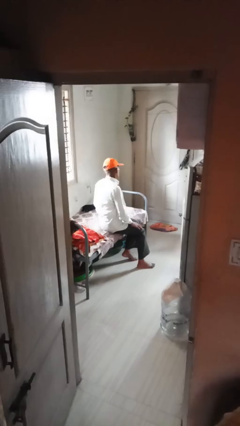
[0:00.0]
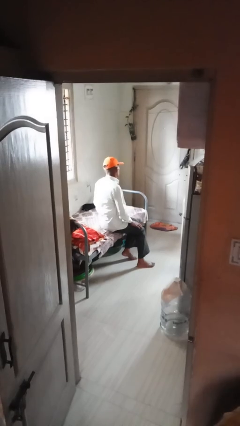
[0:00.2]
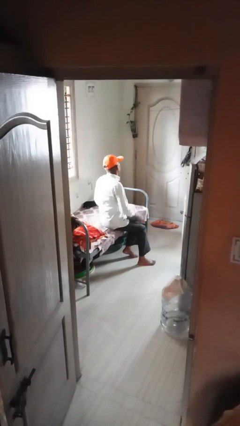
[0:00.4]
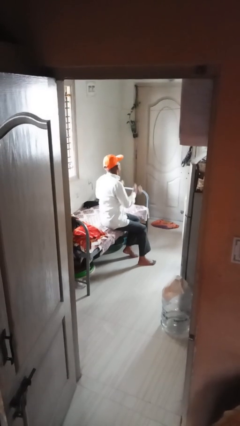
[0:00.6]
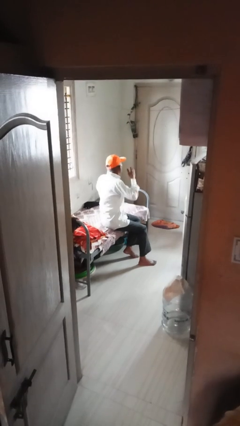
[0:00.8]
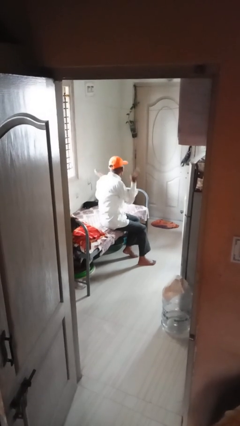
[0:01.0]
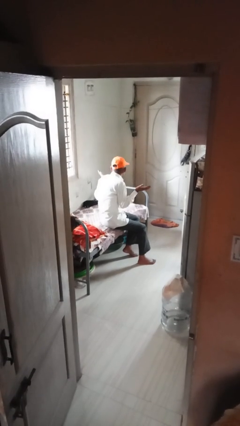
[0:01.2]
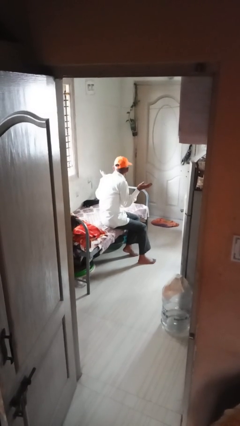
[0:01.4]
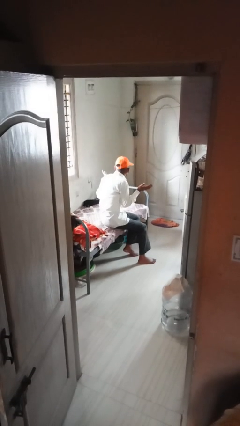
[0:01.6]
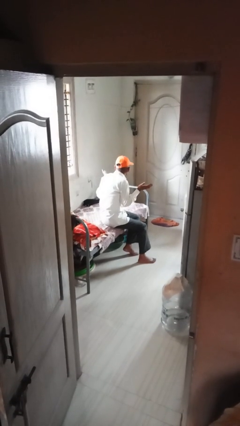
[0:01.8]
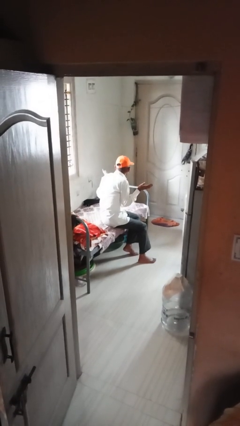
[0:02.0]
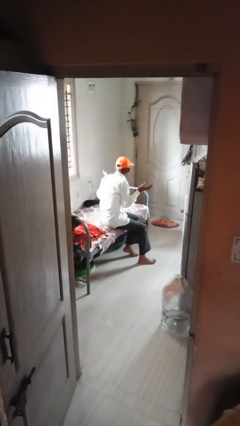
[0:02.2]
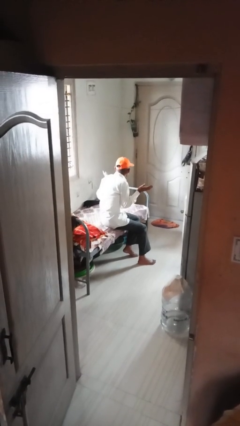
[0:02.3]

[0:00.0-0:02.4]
person shrugs

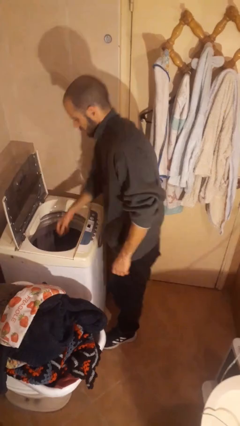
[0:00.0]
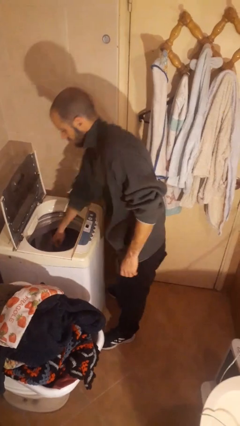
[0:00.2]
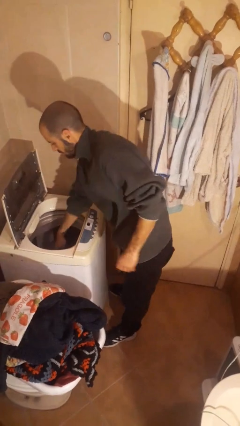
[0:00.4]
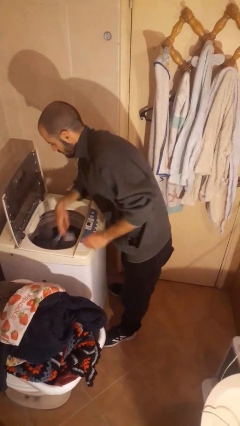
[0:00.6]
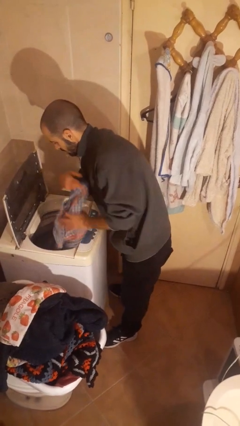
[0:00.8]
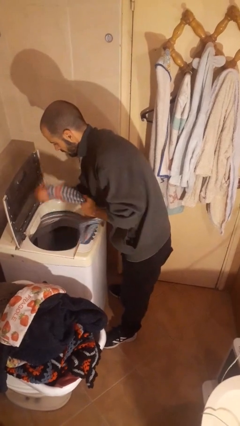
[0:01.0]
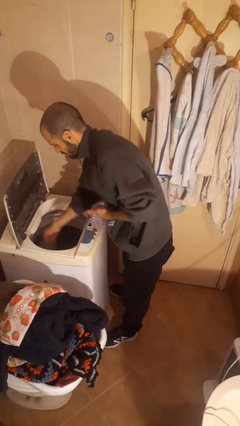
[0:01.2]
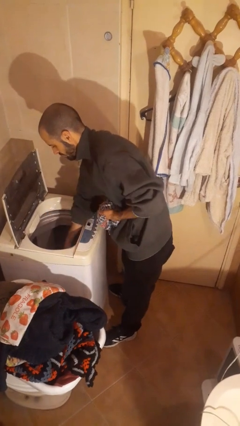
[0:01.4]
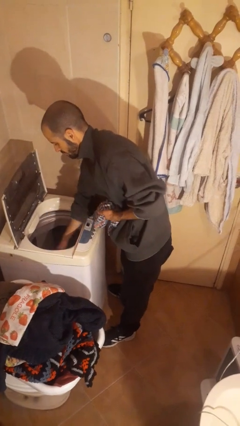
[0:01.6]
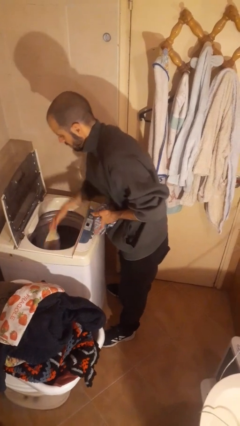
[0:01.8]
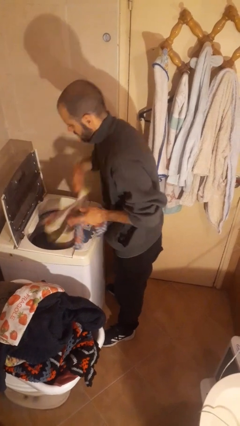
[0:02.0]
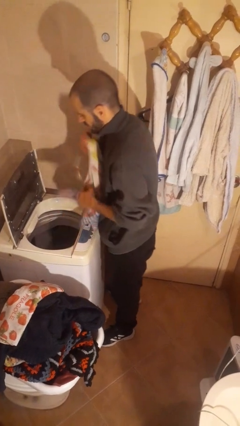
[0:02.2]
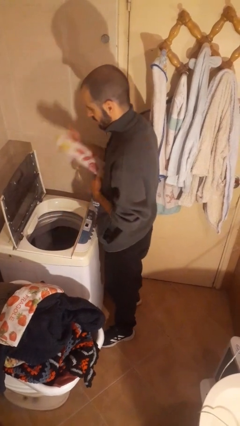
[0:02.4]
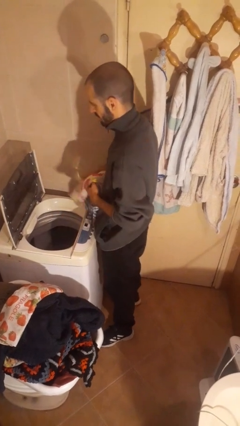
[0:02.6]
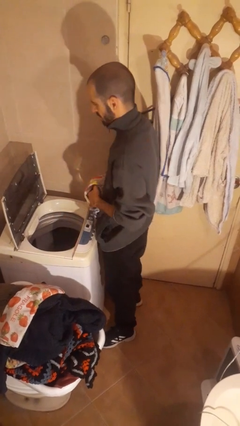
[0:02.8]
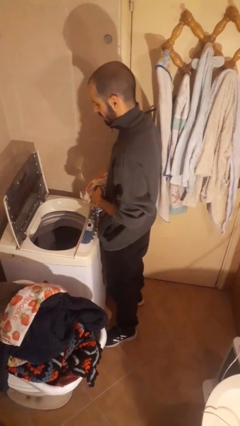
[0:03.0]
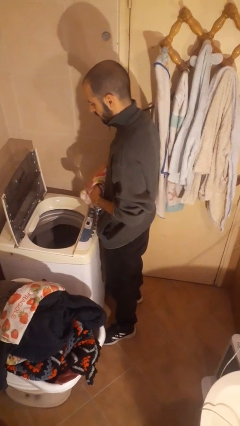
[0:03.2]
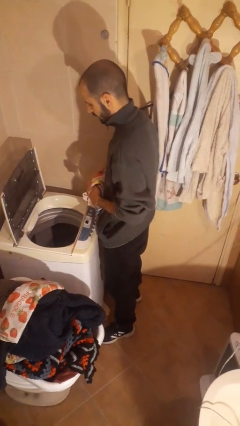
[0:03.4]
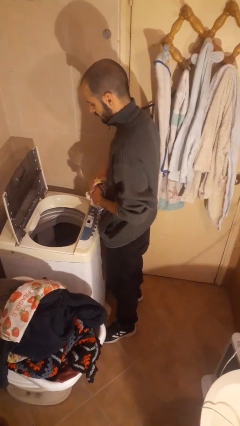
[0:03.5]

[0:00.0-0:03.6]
person loads clotheswasher

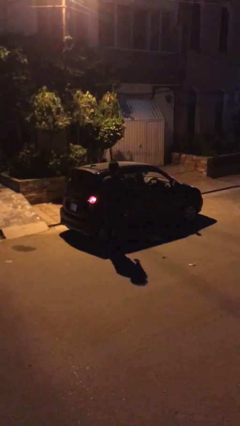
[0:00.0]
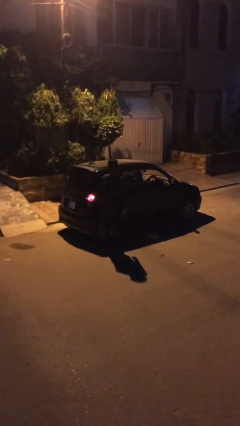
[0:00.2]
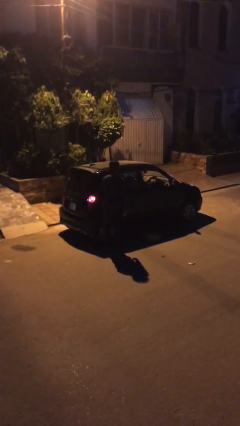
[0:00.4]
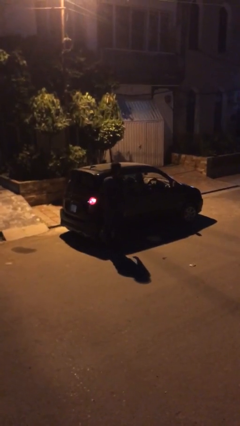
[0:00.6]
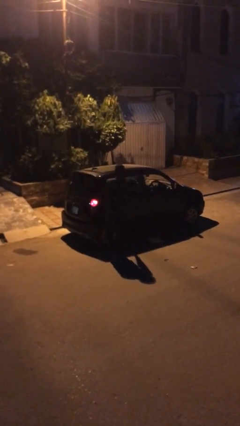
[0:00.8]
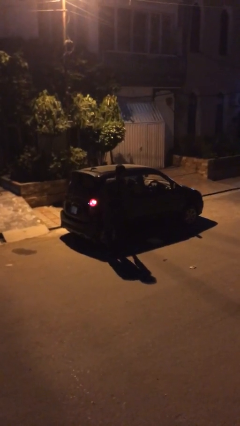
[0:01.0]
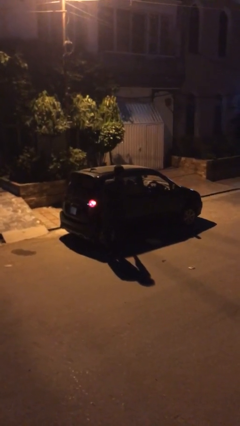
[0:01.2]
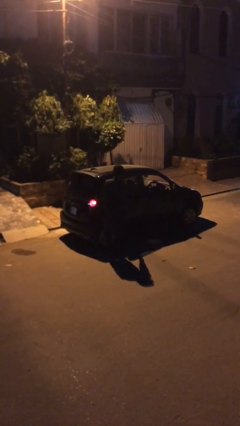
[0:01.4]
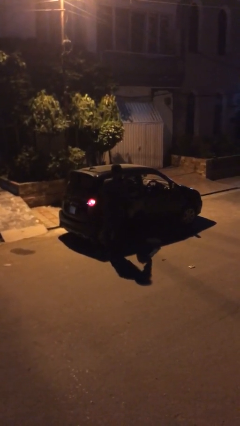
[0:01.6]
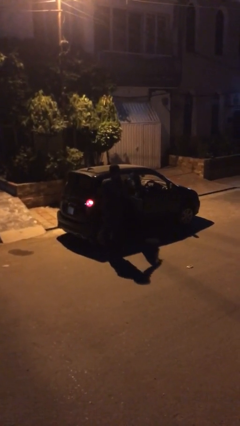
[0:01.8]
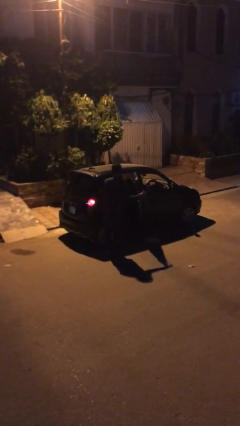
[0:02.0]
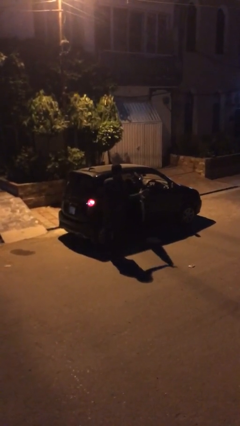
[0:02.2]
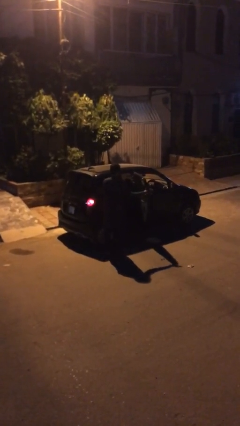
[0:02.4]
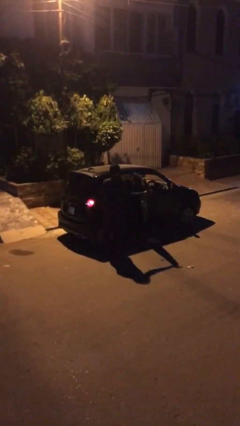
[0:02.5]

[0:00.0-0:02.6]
person opens car door

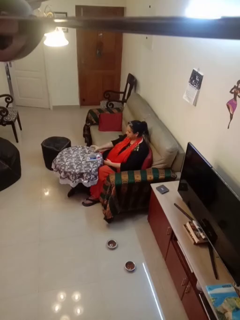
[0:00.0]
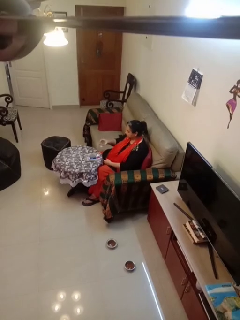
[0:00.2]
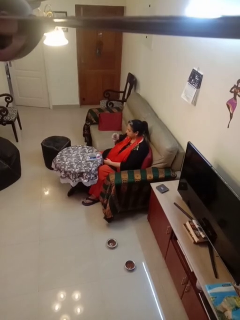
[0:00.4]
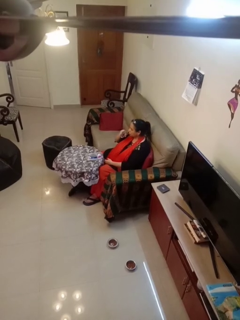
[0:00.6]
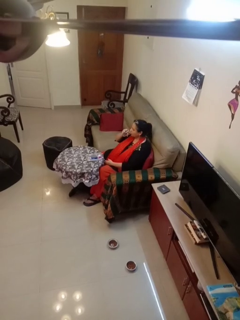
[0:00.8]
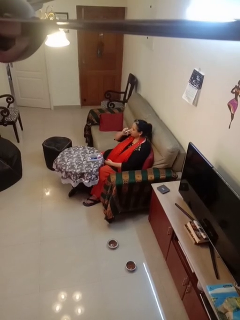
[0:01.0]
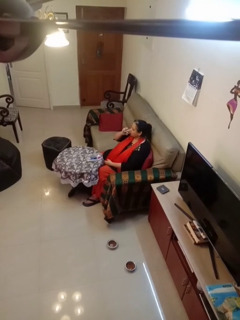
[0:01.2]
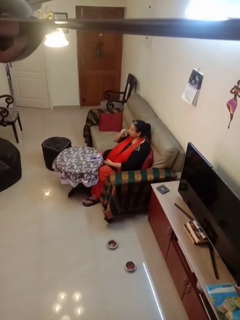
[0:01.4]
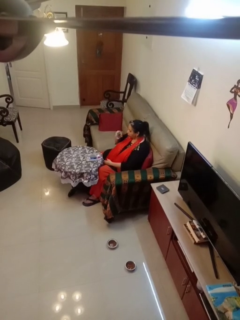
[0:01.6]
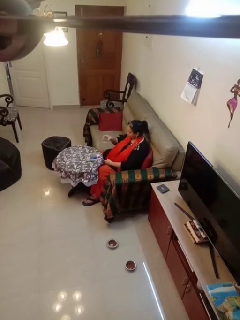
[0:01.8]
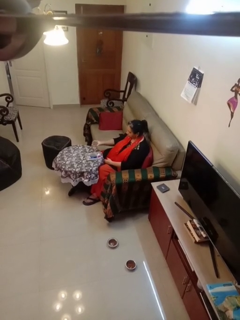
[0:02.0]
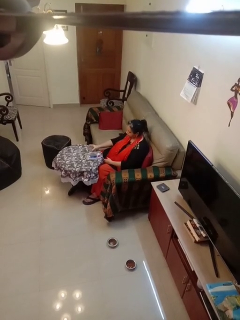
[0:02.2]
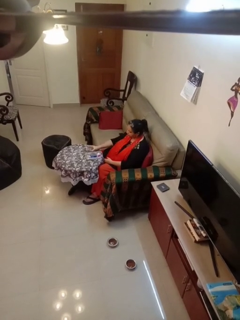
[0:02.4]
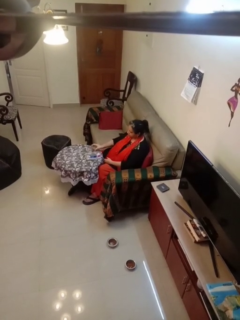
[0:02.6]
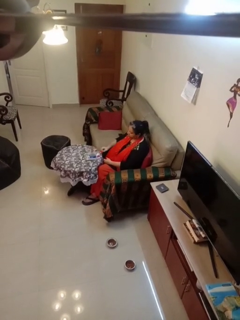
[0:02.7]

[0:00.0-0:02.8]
person drinks from cup

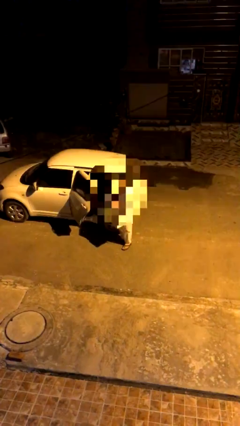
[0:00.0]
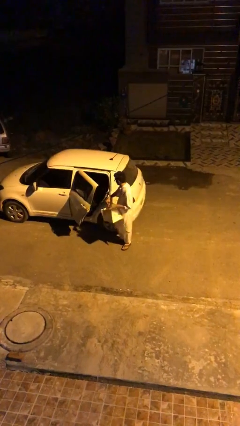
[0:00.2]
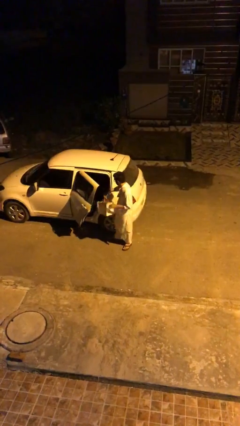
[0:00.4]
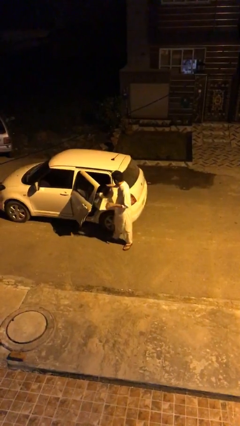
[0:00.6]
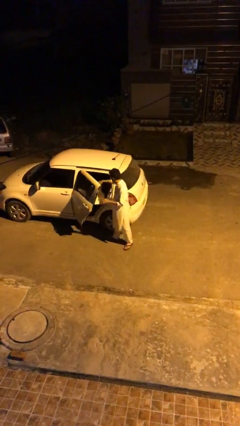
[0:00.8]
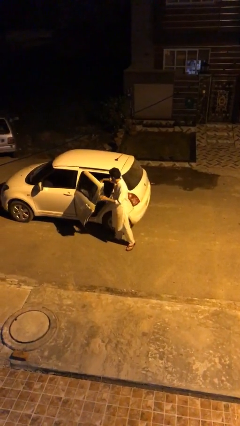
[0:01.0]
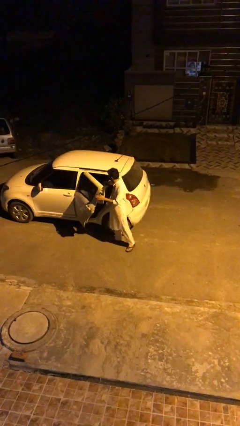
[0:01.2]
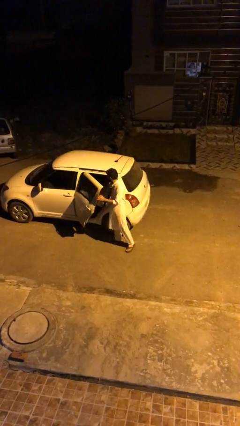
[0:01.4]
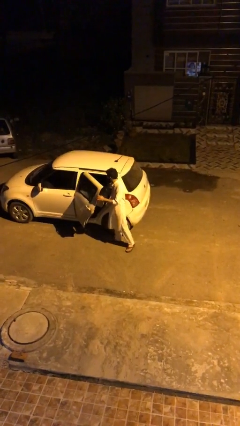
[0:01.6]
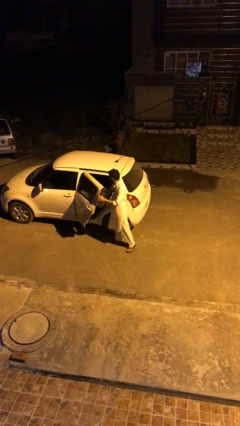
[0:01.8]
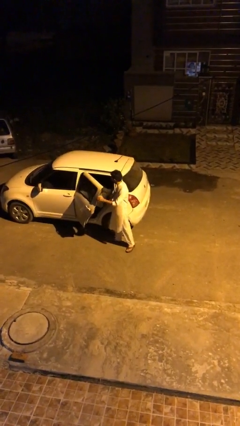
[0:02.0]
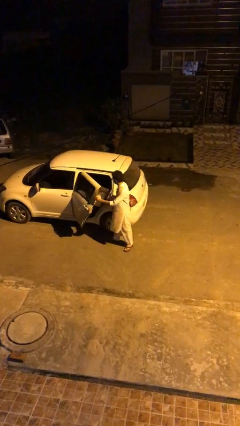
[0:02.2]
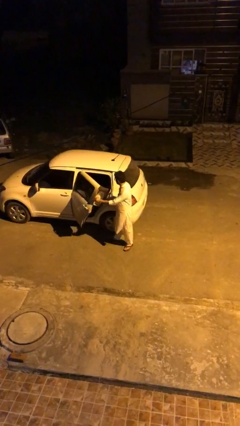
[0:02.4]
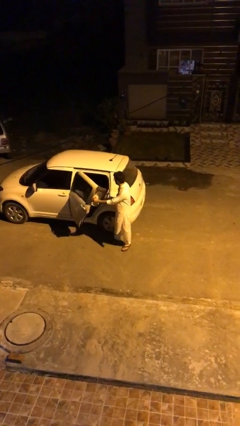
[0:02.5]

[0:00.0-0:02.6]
person loads car

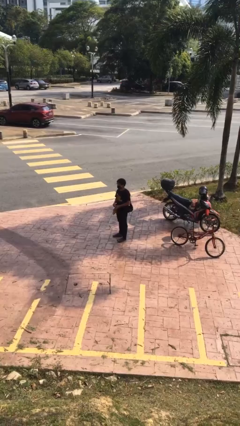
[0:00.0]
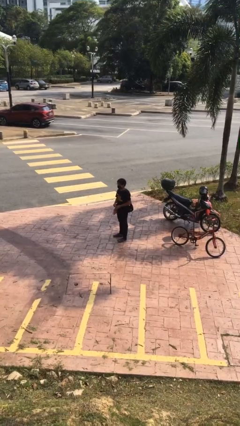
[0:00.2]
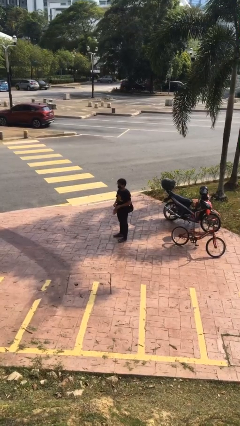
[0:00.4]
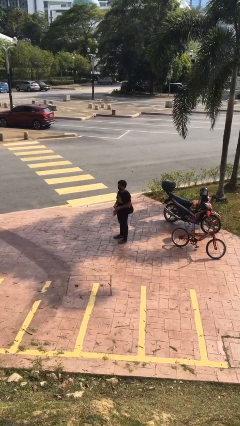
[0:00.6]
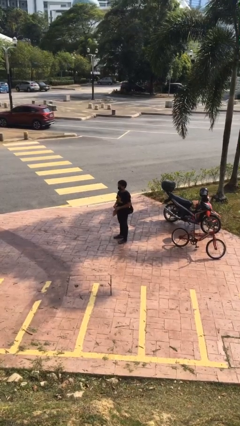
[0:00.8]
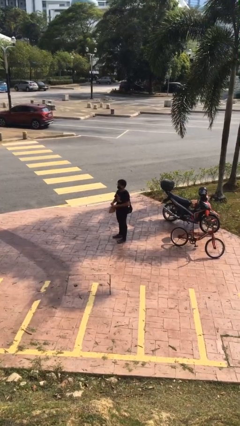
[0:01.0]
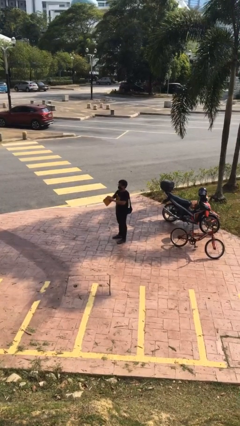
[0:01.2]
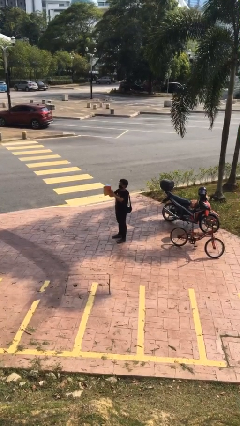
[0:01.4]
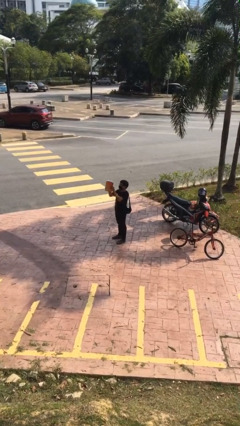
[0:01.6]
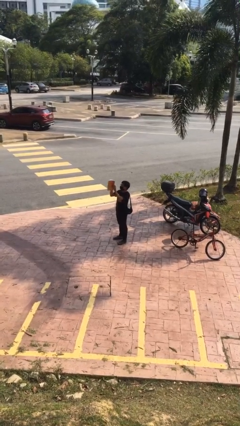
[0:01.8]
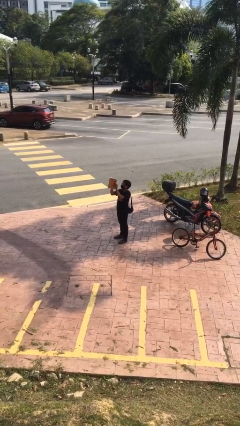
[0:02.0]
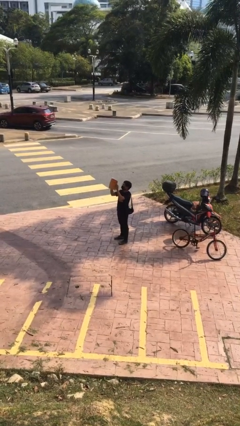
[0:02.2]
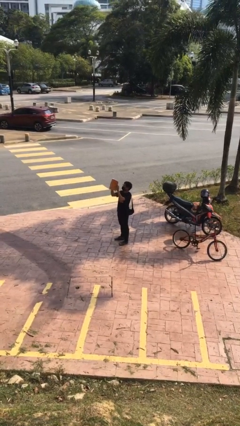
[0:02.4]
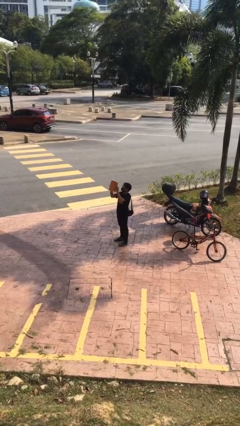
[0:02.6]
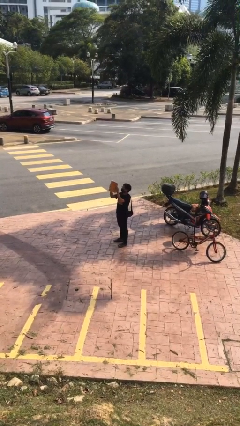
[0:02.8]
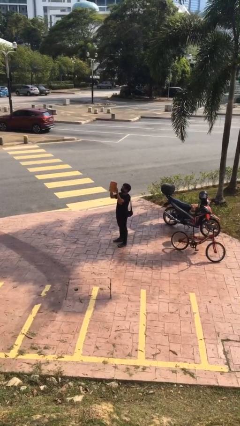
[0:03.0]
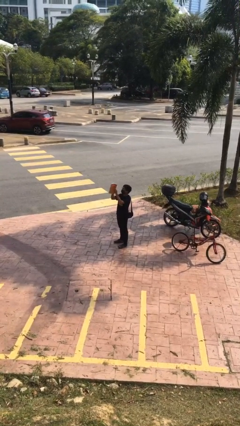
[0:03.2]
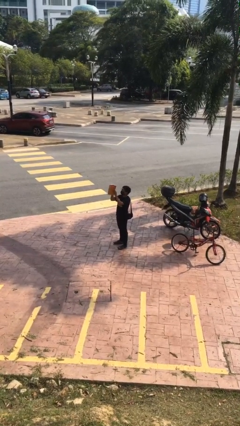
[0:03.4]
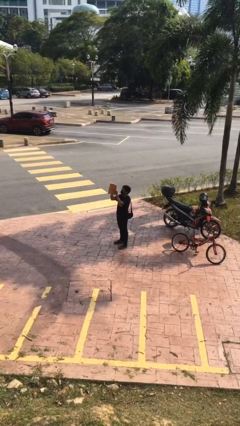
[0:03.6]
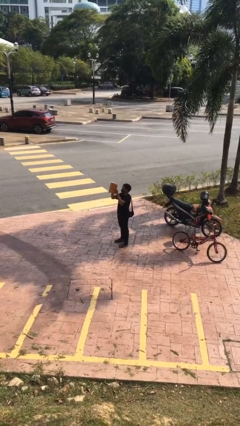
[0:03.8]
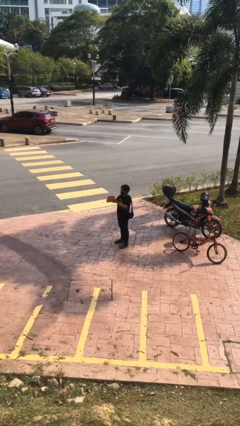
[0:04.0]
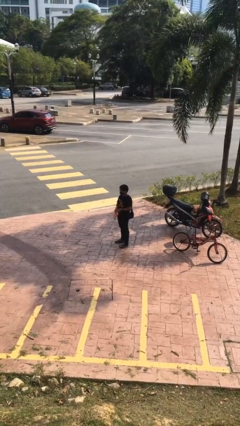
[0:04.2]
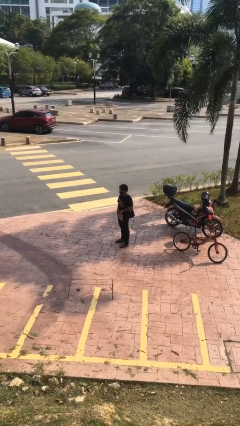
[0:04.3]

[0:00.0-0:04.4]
person reads document
